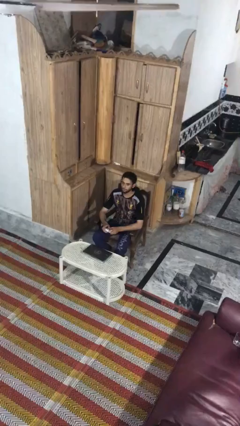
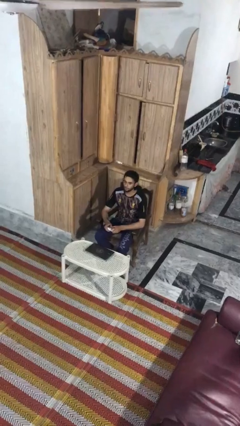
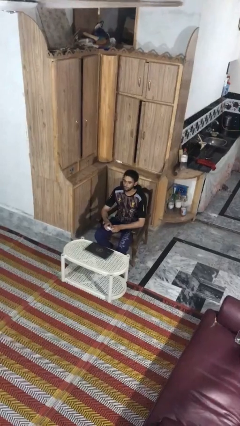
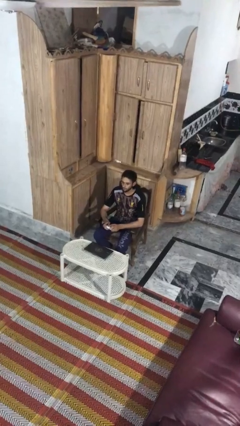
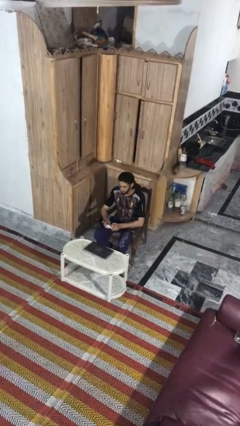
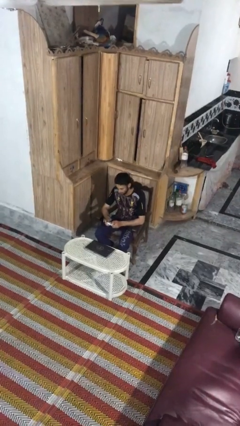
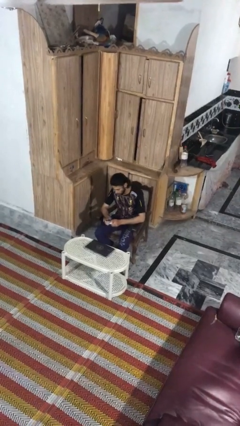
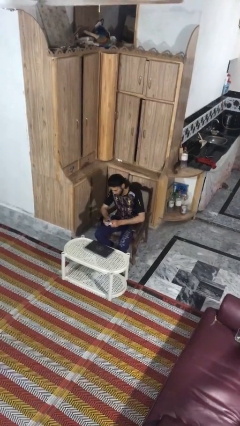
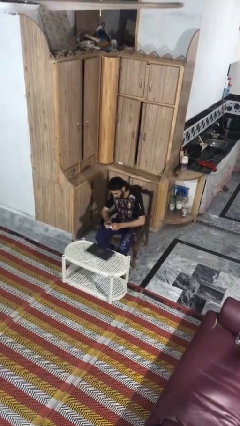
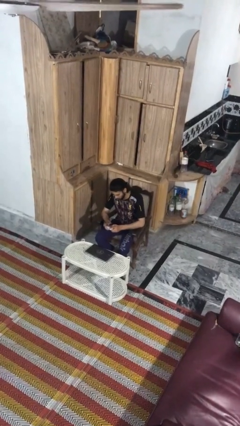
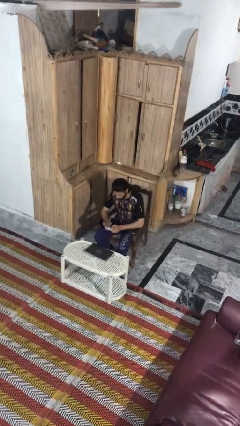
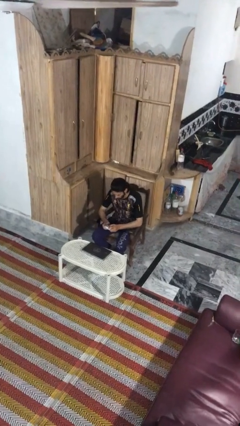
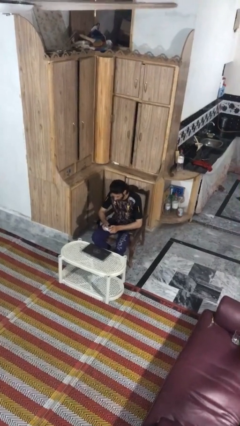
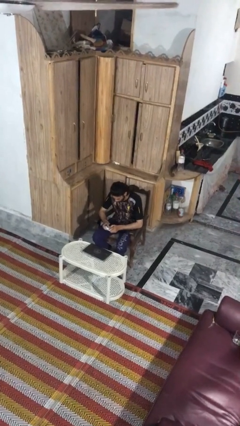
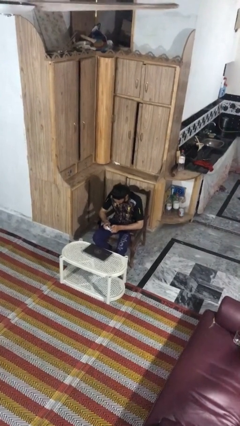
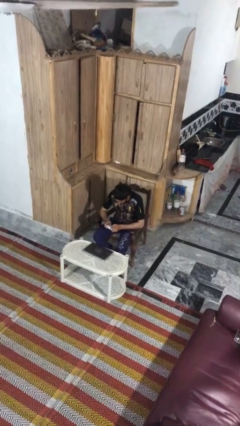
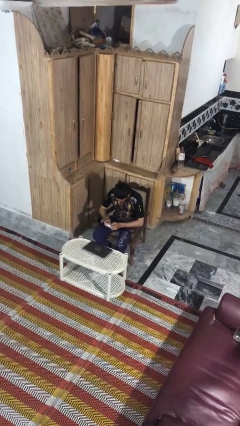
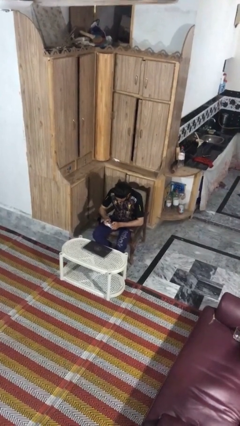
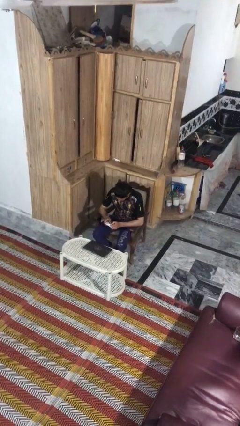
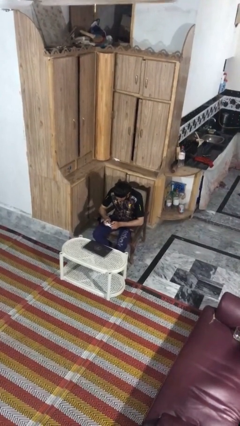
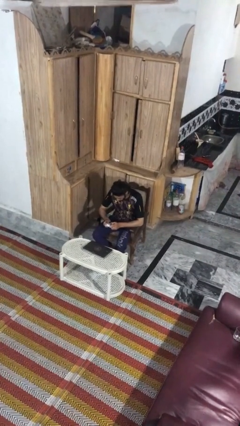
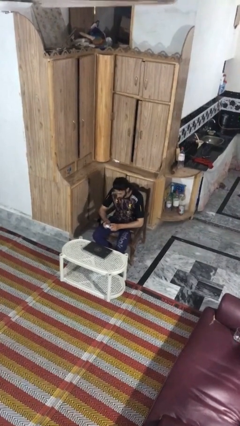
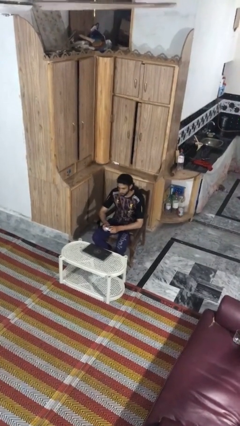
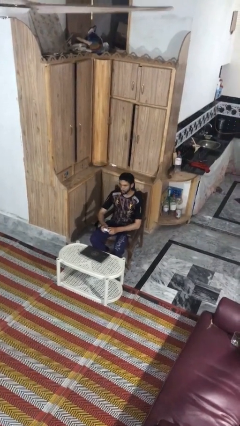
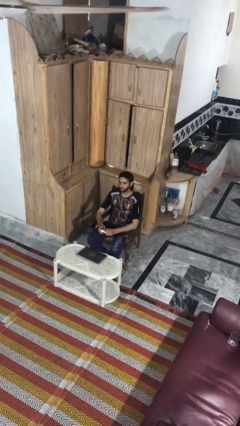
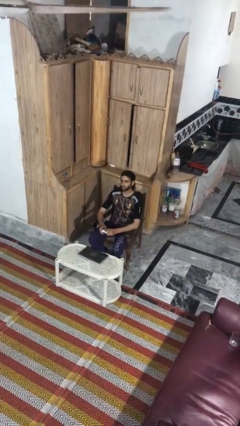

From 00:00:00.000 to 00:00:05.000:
person interacts with handheld game

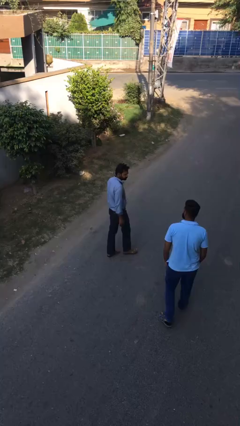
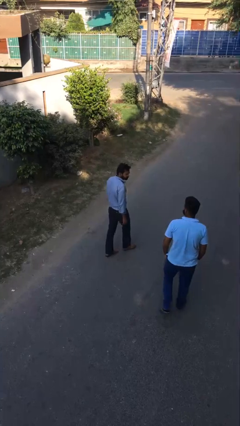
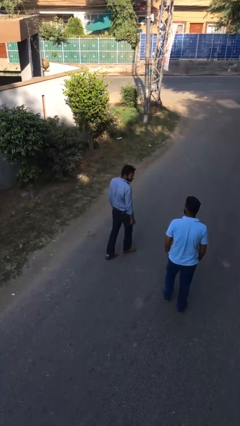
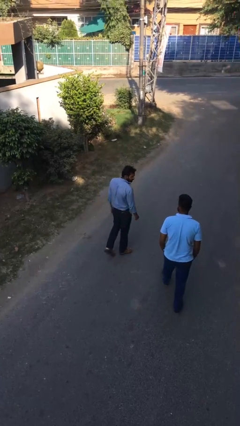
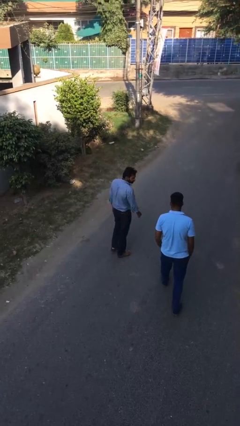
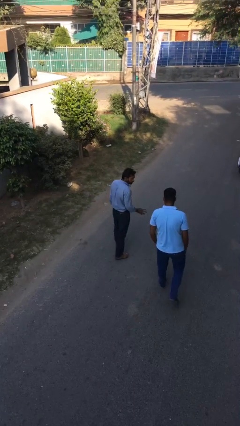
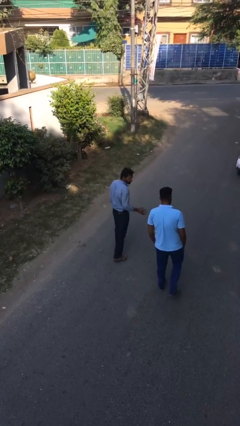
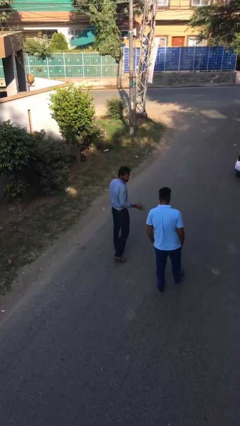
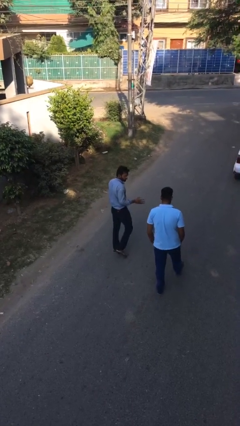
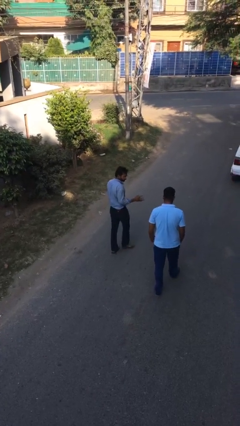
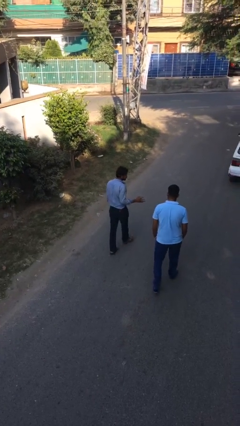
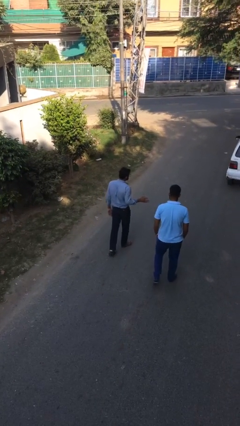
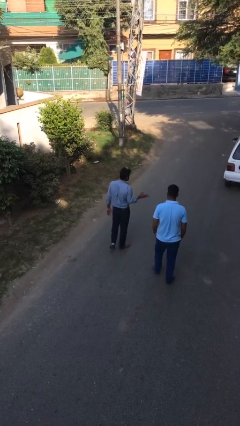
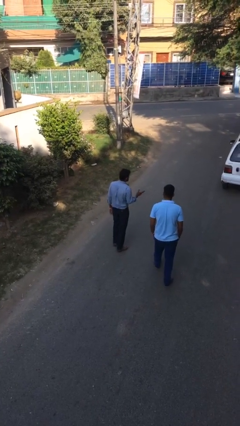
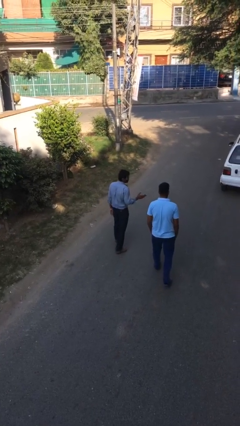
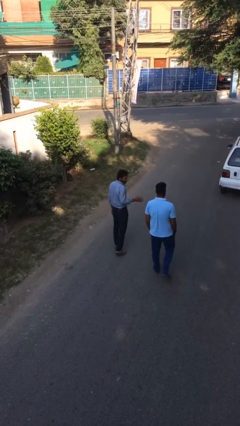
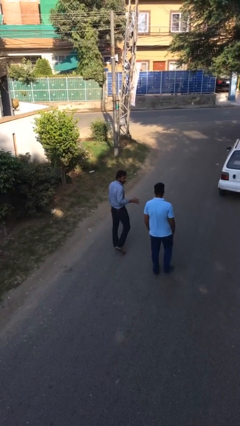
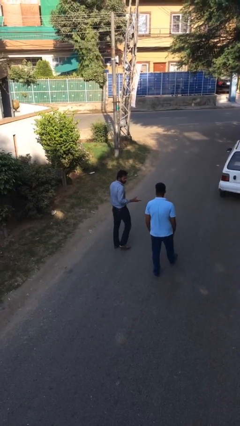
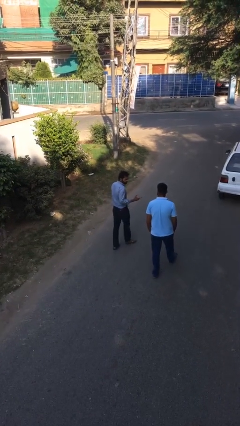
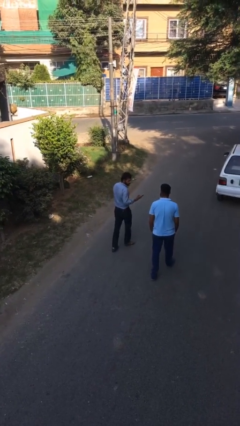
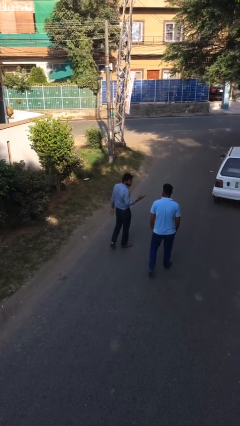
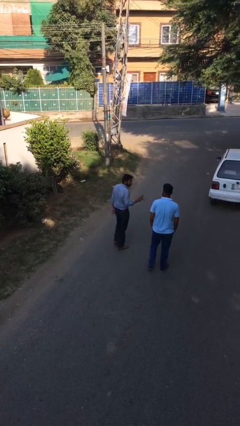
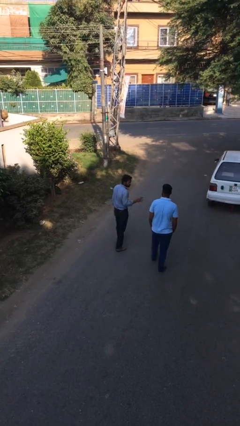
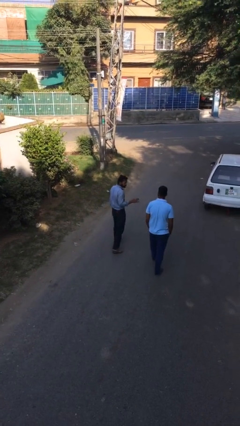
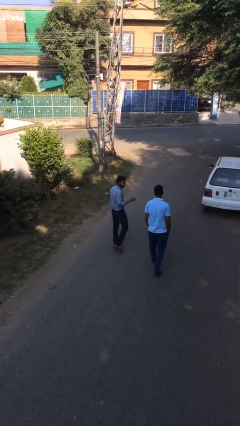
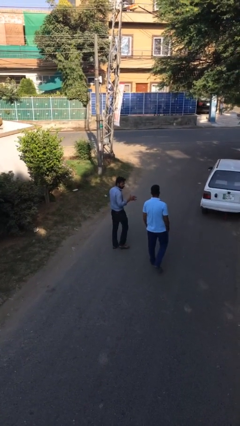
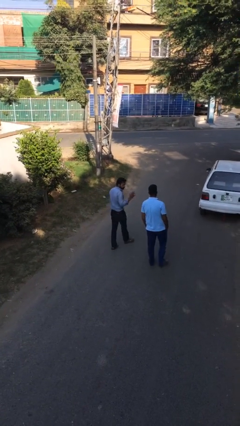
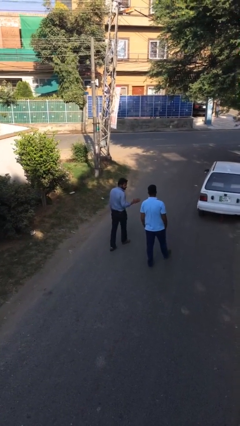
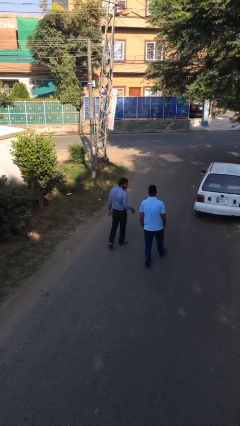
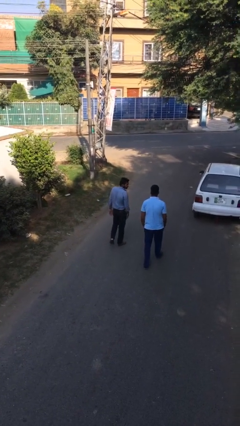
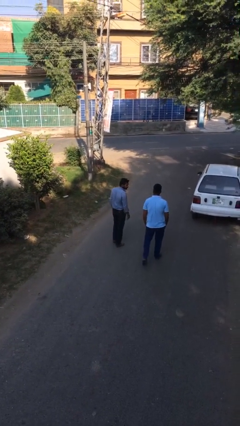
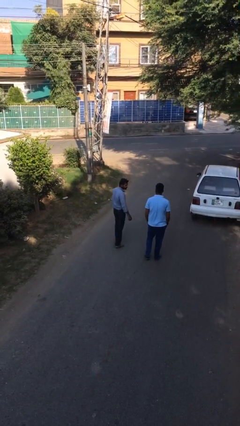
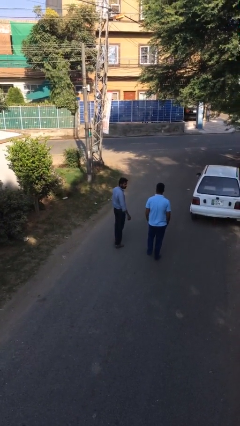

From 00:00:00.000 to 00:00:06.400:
person talks to person

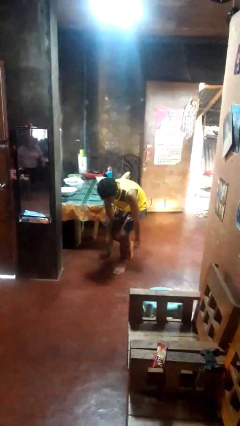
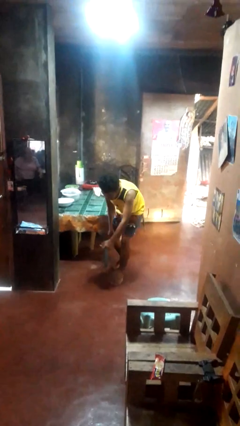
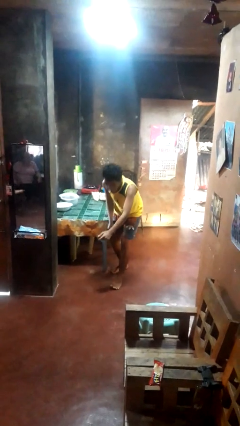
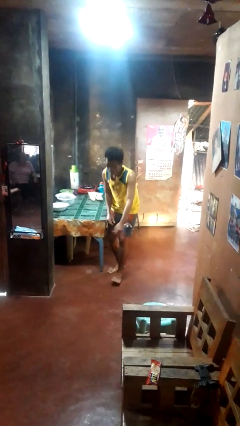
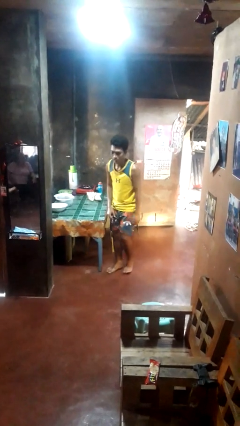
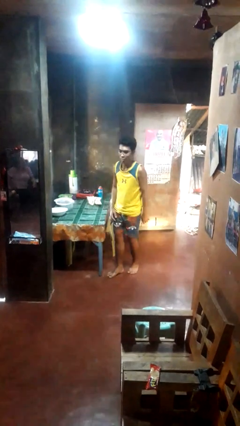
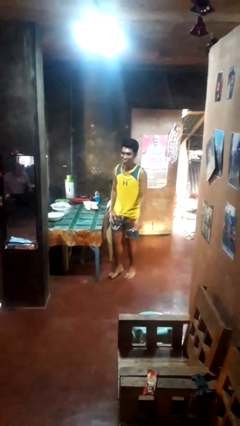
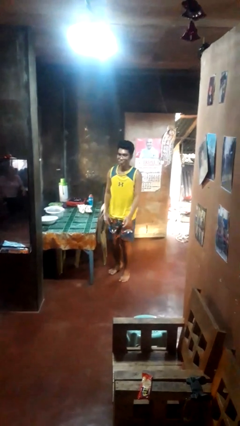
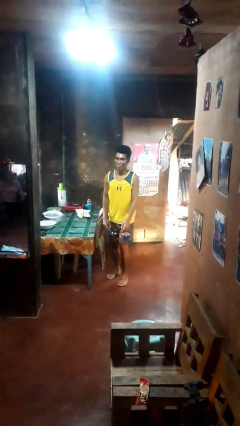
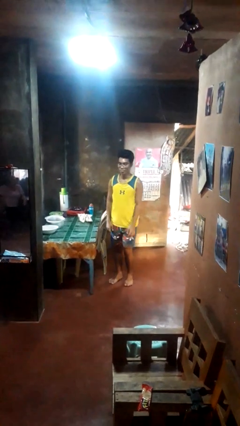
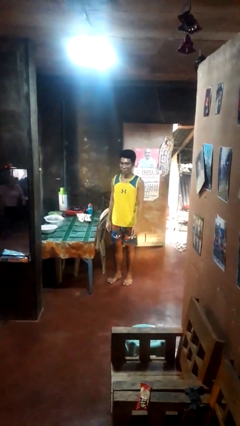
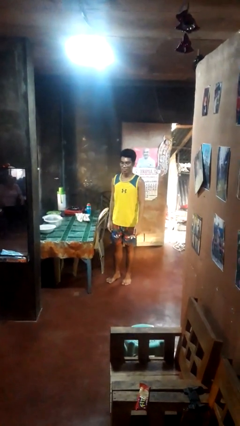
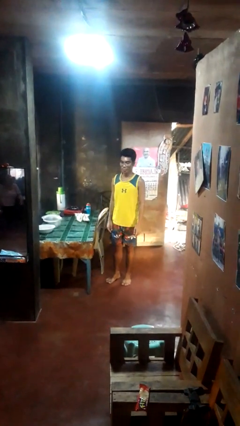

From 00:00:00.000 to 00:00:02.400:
person stands up from floor

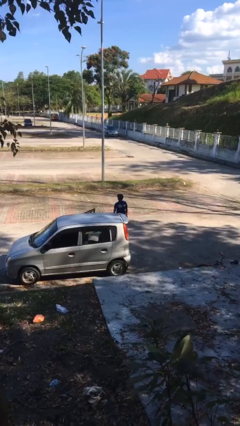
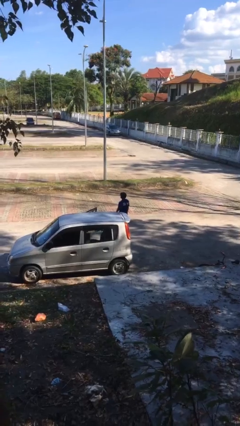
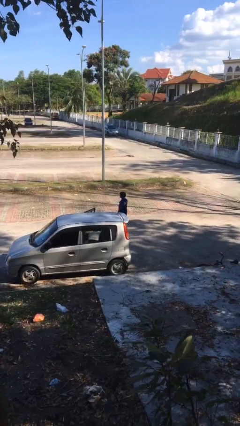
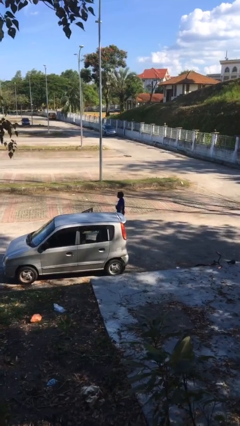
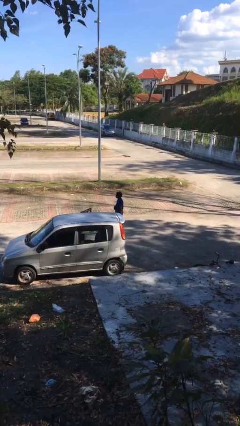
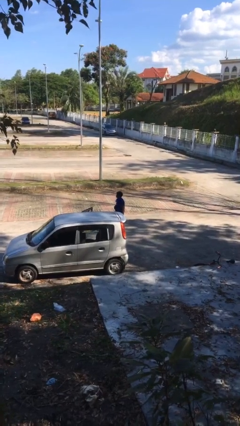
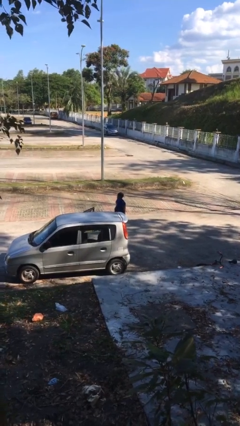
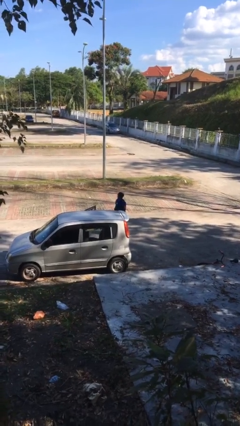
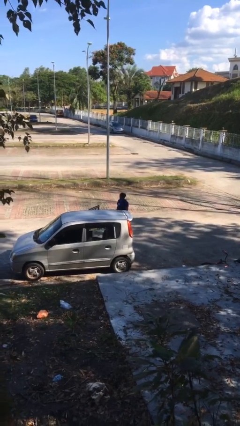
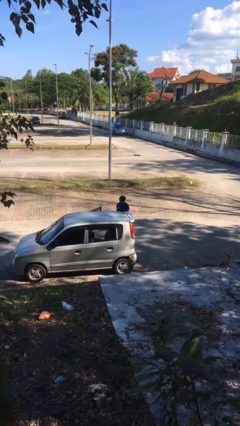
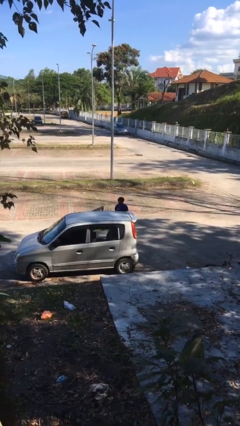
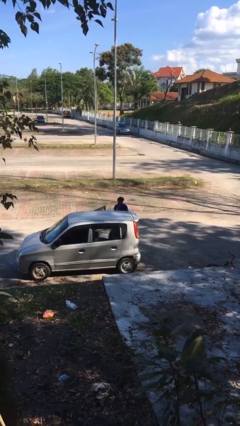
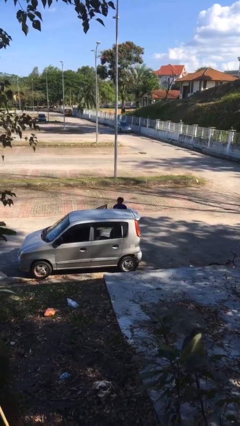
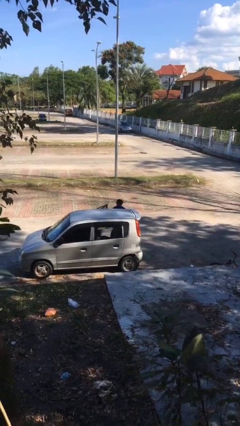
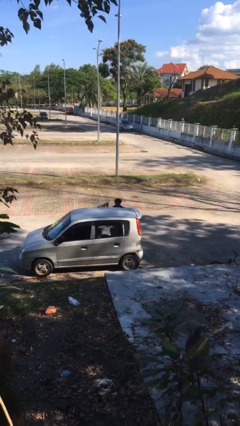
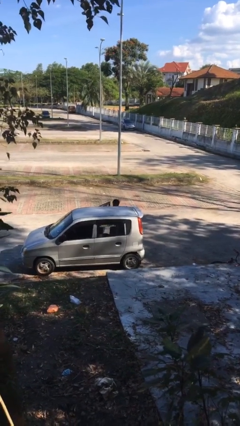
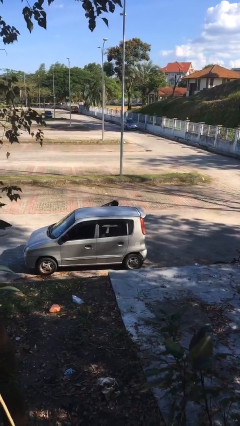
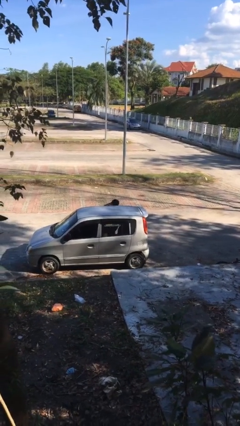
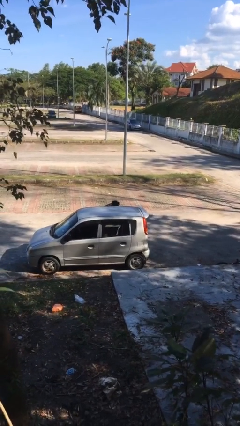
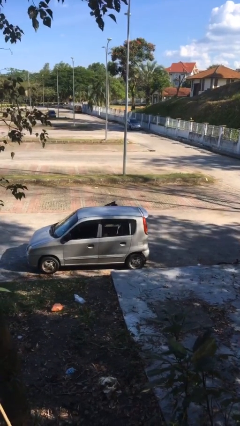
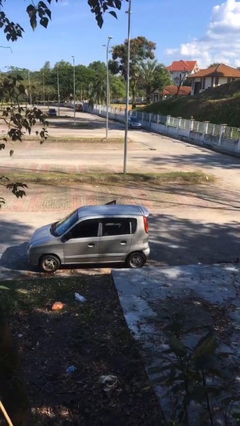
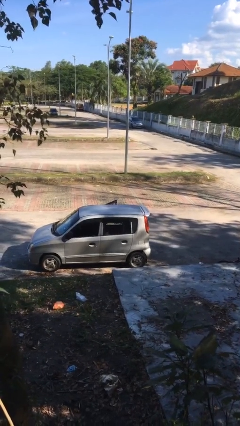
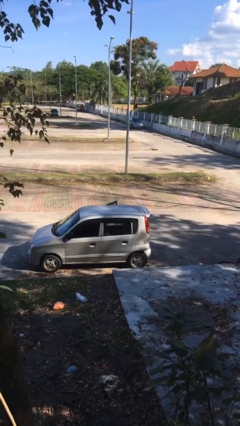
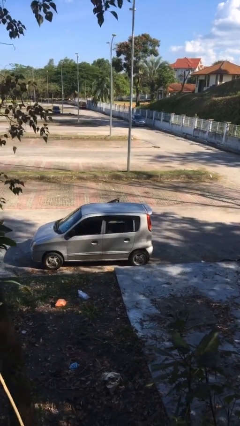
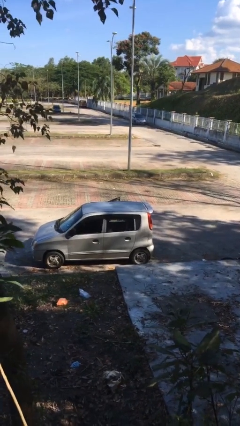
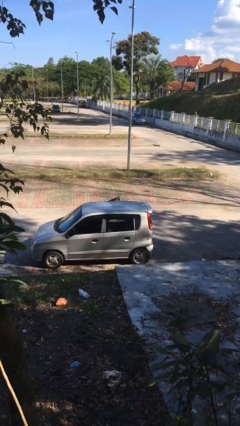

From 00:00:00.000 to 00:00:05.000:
person enters car
